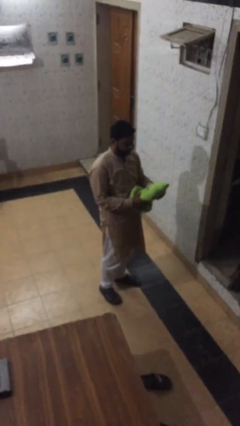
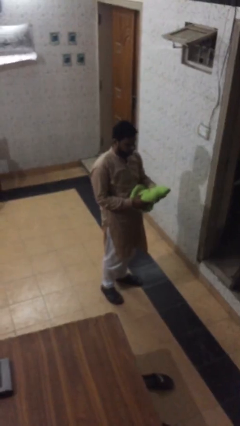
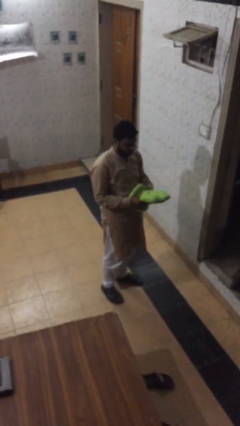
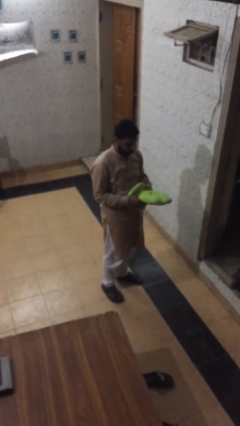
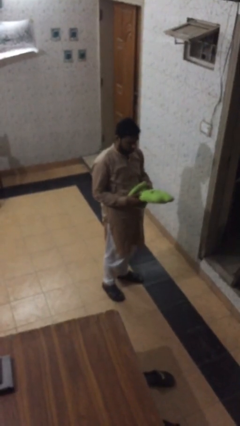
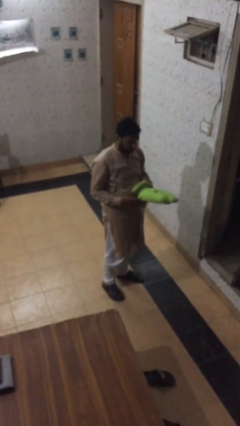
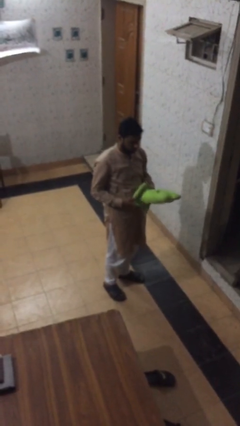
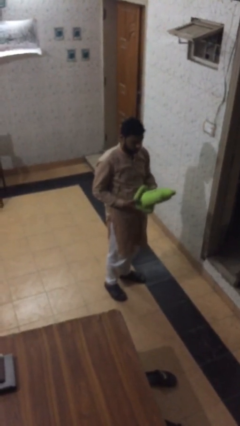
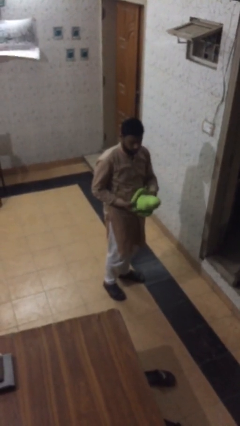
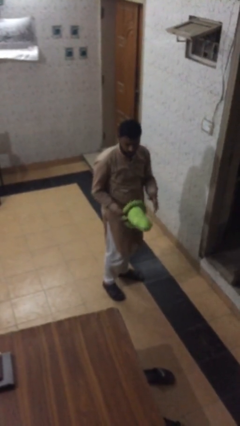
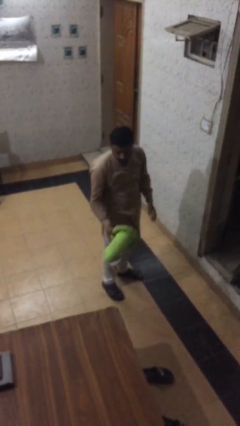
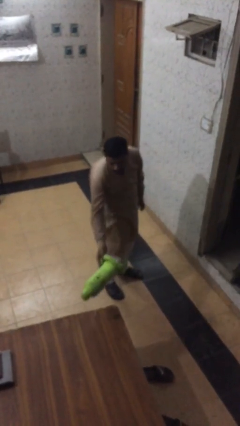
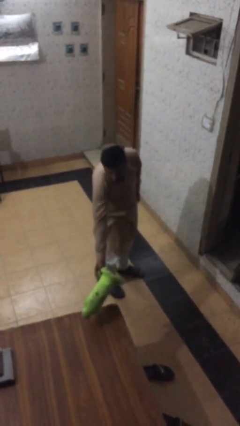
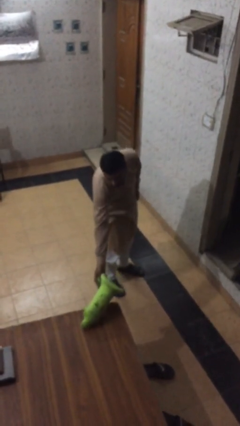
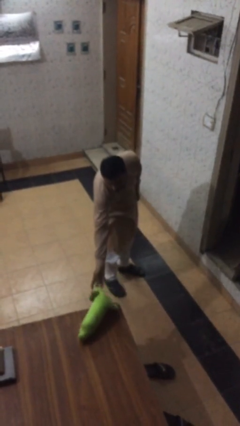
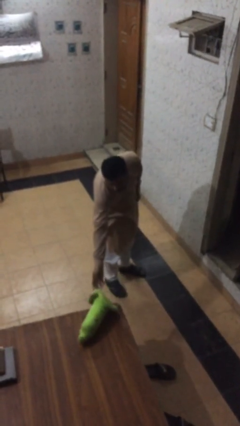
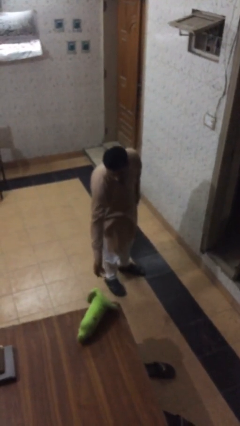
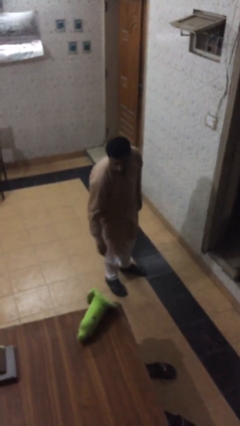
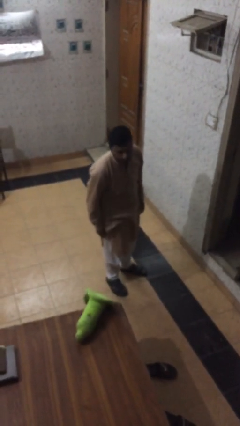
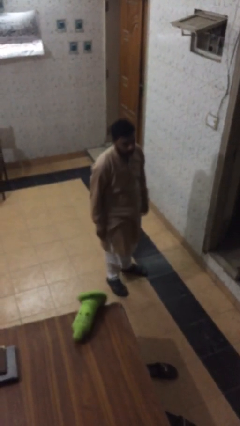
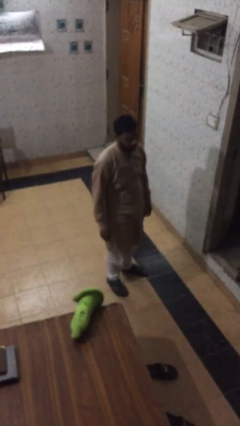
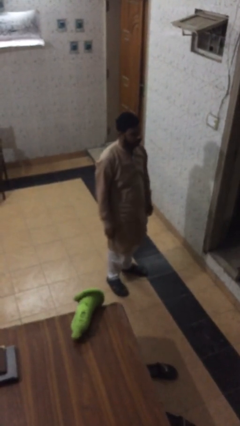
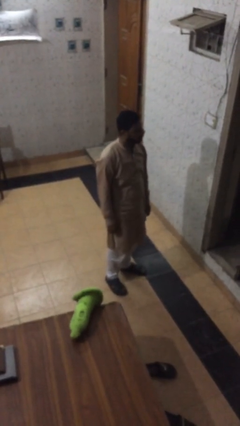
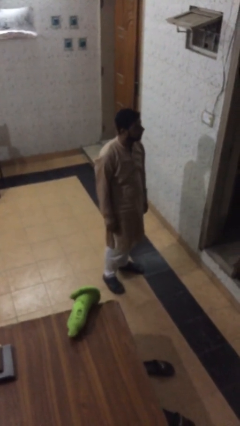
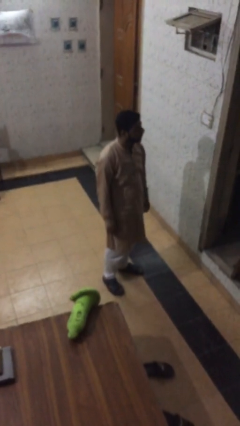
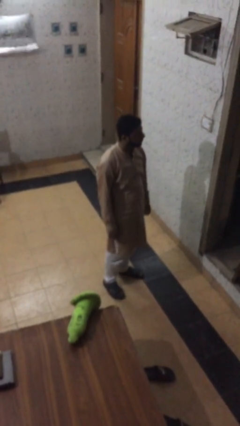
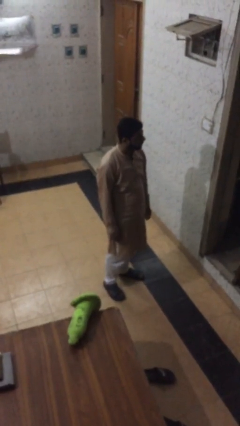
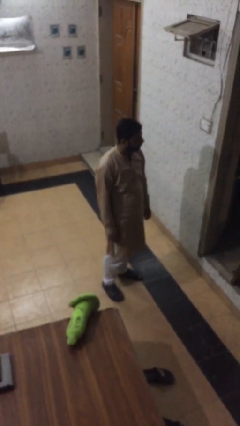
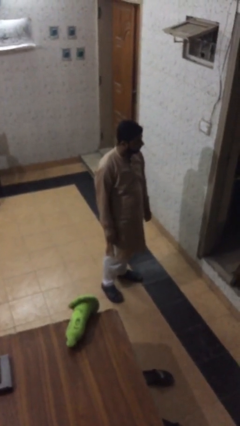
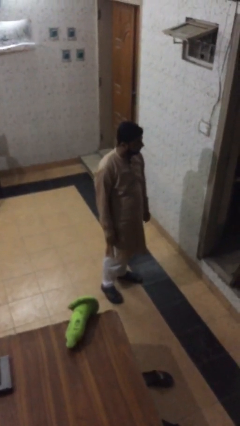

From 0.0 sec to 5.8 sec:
person puts down object on table

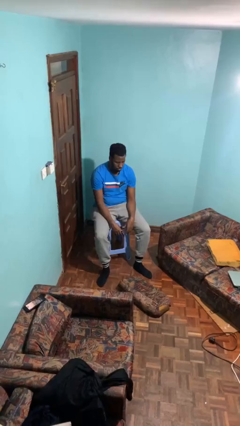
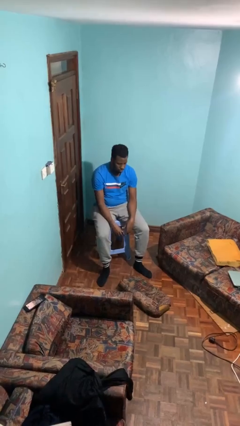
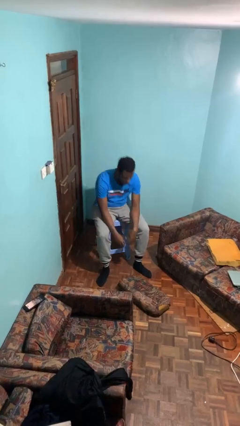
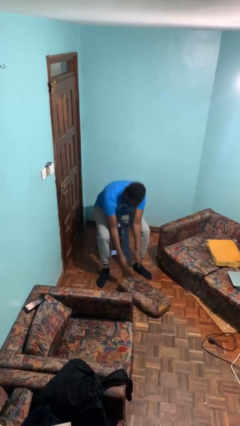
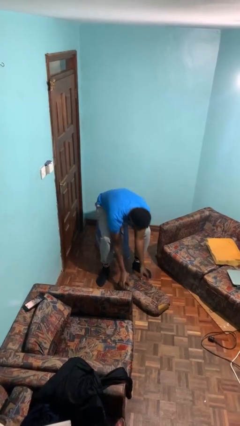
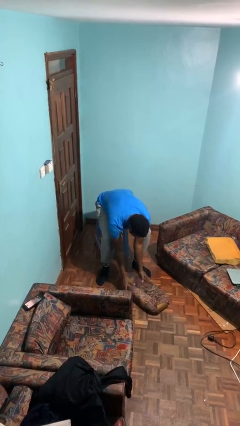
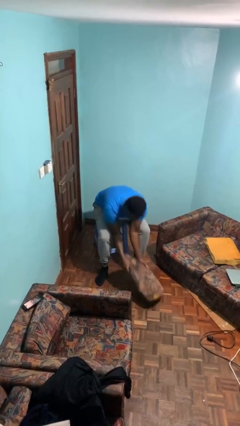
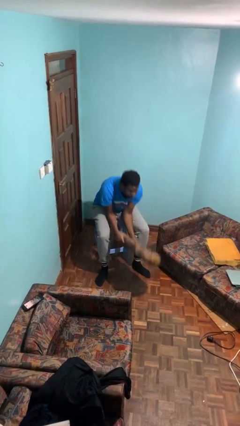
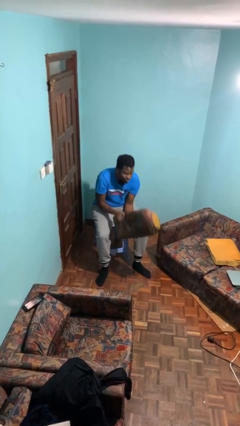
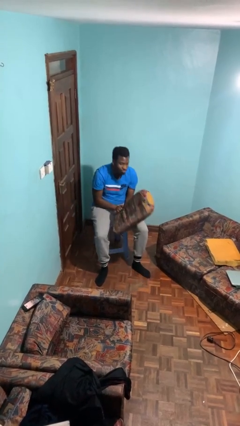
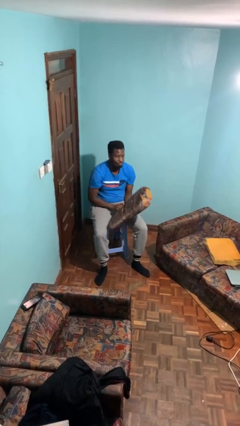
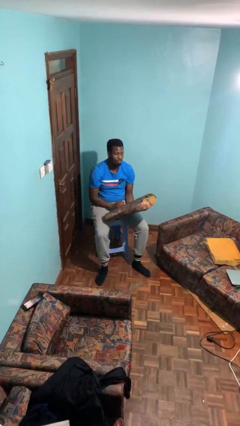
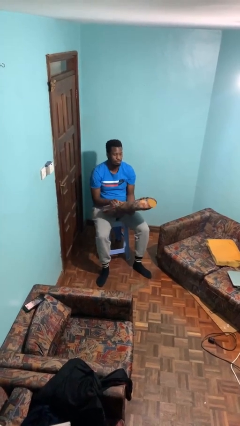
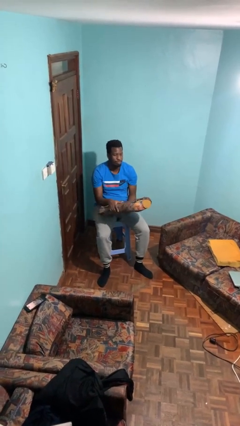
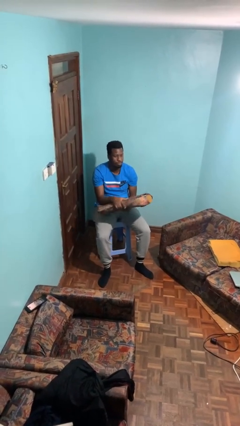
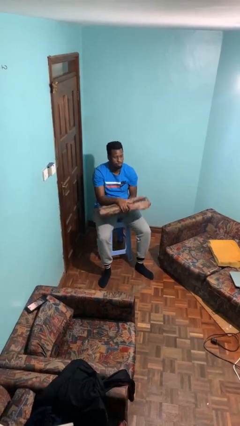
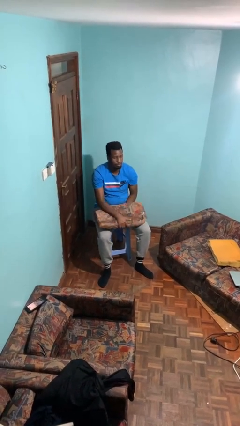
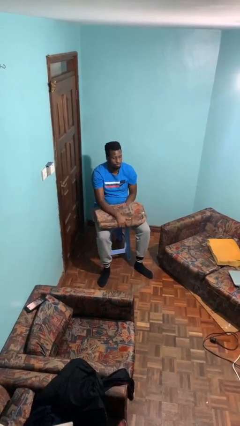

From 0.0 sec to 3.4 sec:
person picks up object from floor

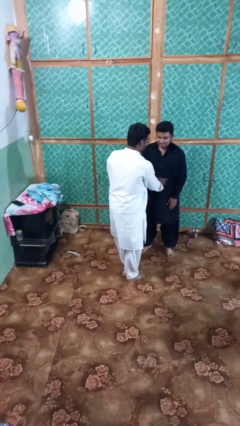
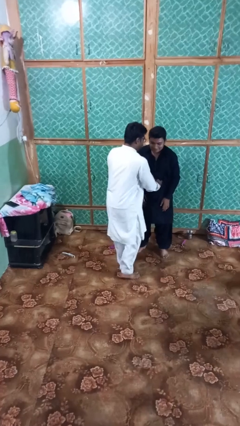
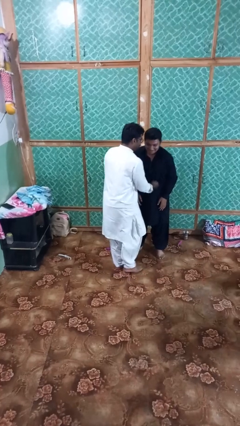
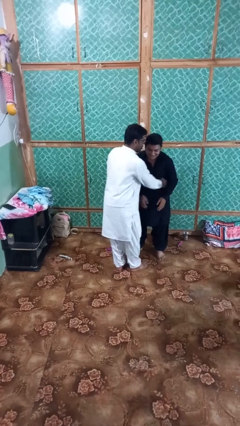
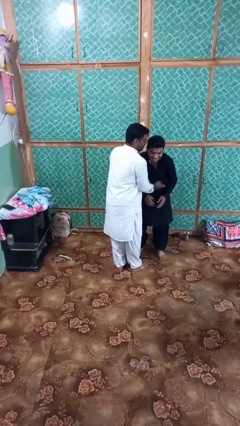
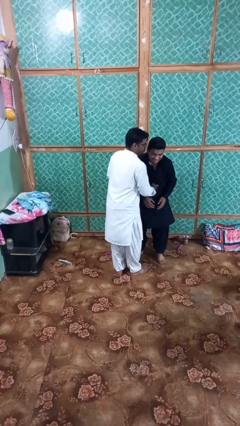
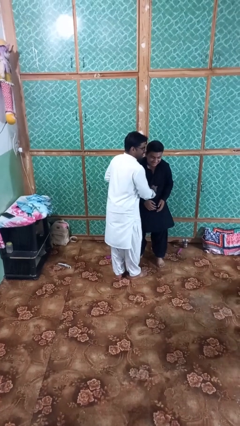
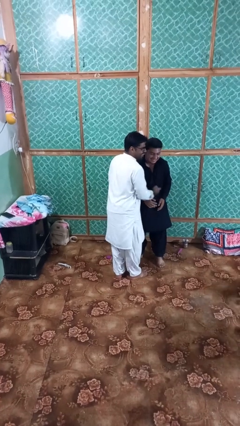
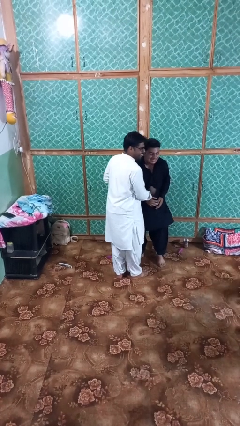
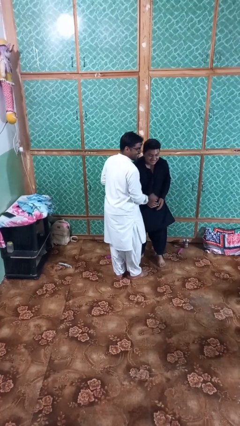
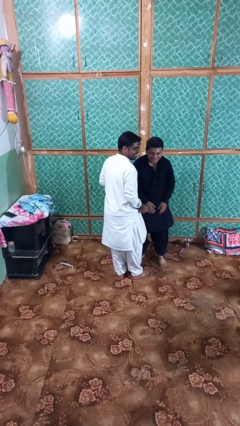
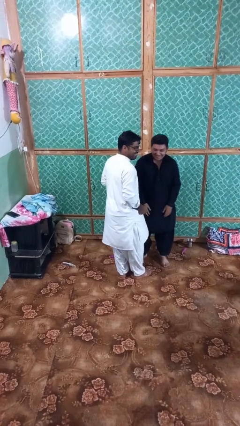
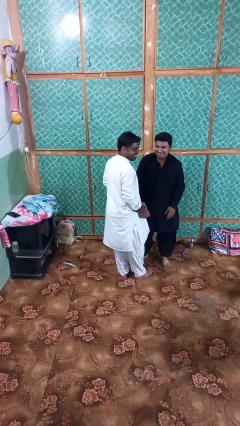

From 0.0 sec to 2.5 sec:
person tickles person

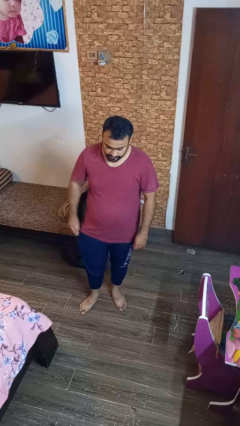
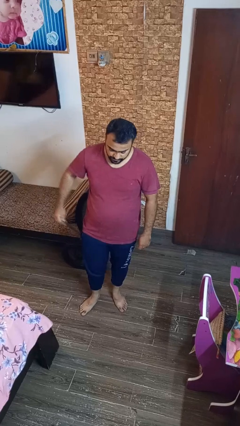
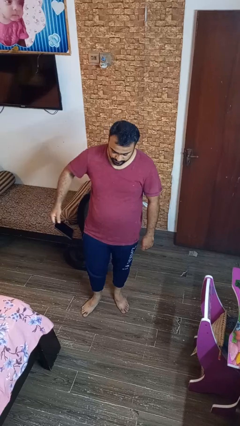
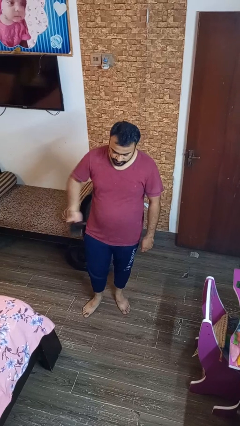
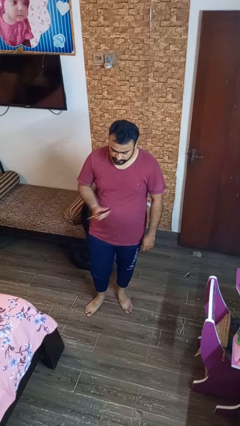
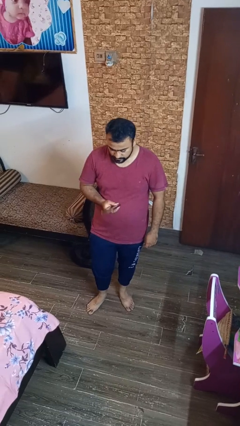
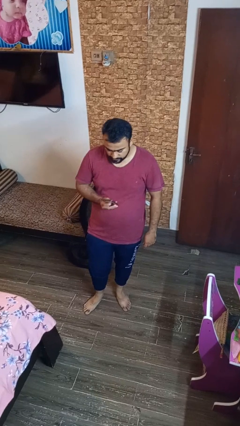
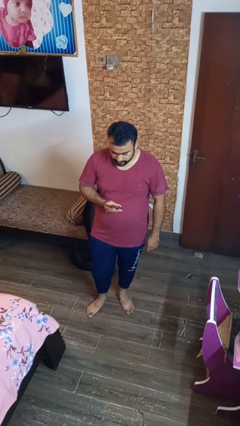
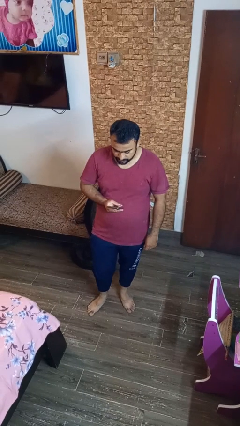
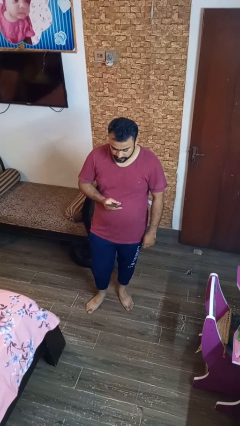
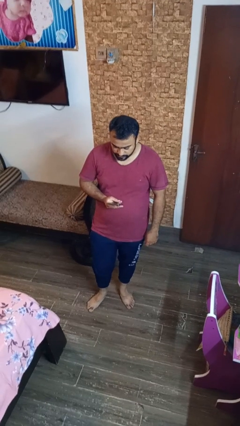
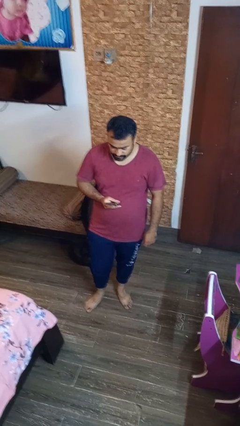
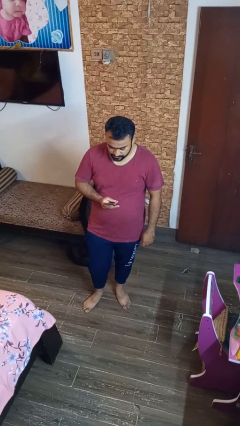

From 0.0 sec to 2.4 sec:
person takes phone from pocket

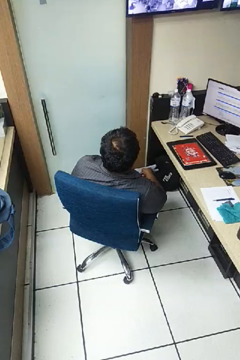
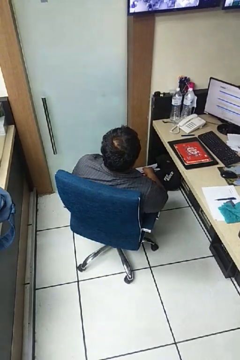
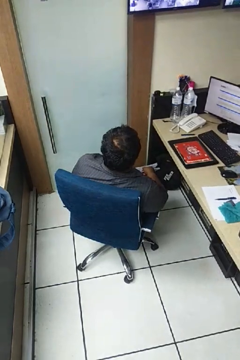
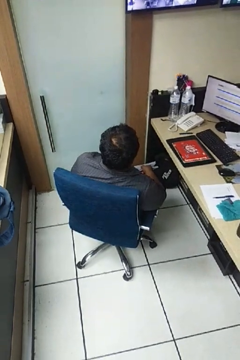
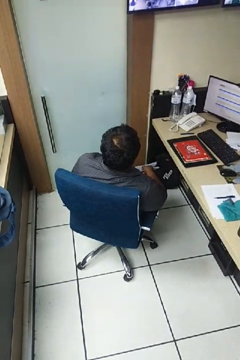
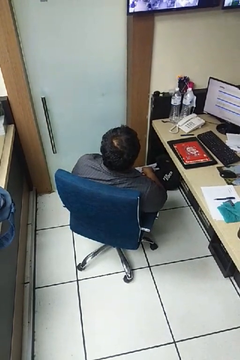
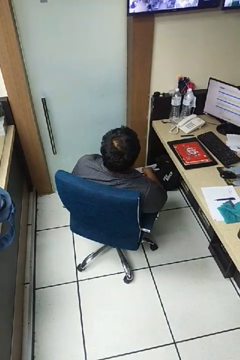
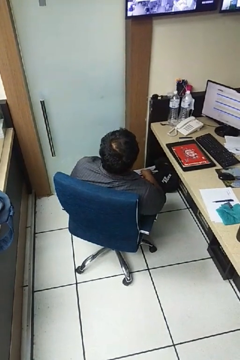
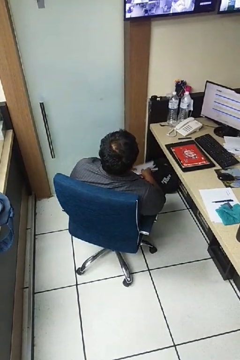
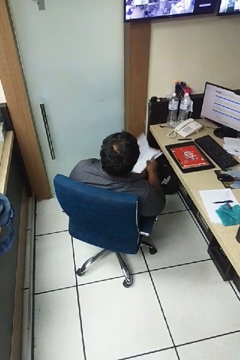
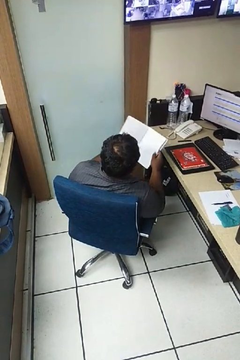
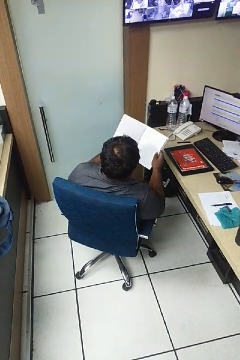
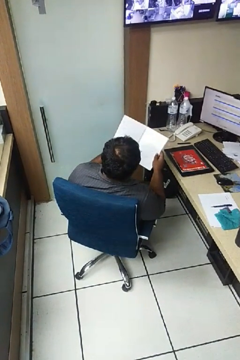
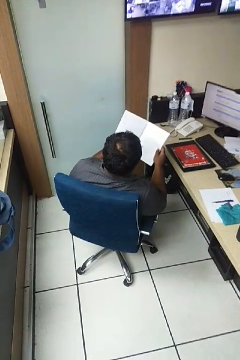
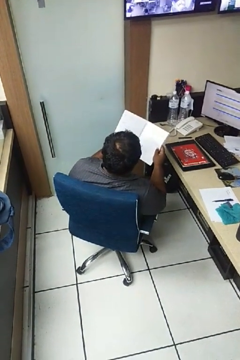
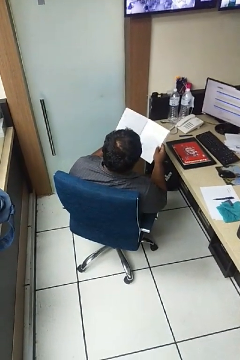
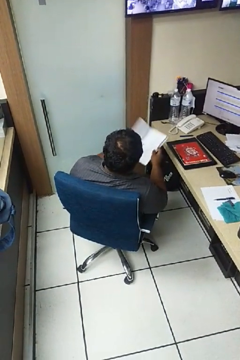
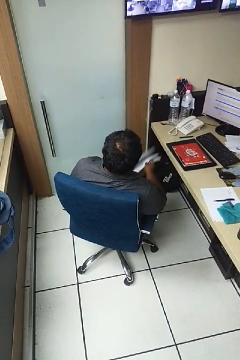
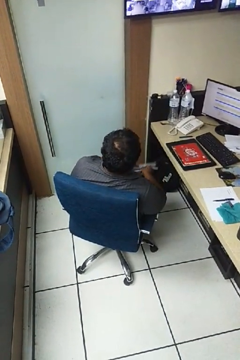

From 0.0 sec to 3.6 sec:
person reads book

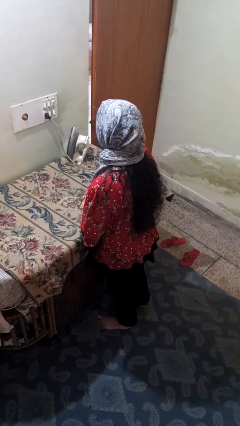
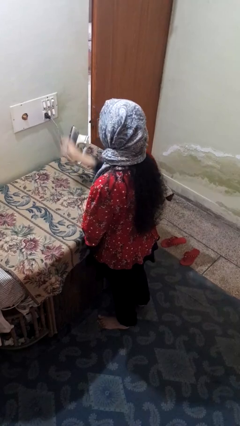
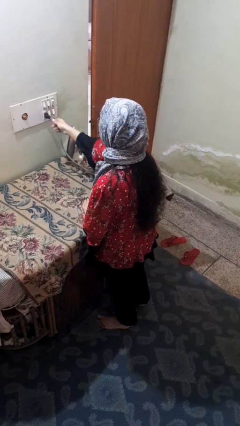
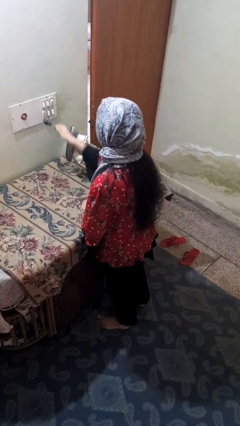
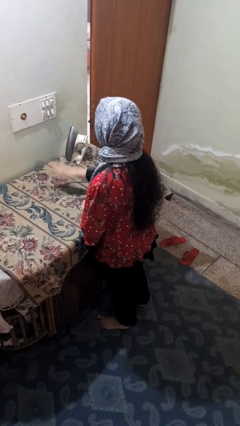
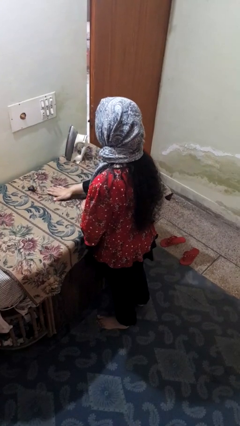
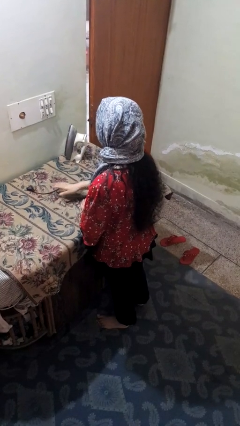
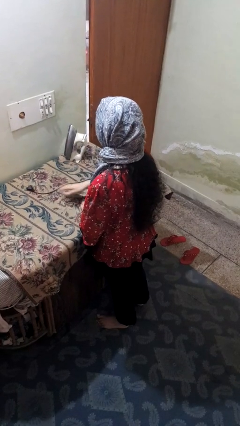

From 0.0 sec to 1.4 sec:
person unplugs from electrical socket
